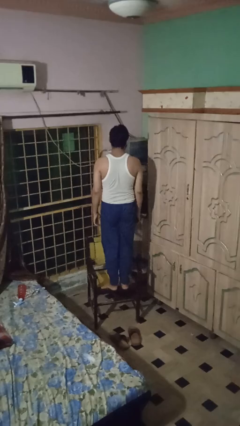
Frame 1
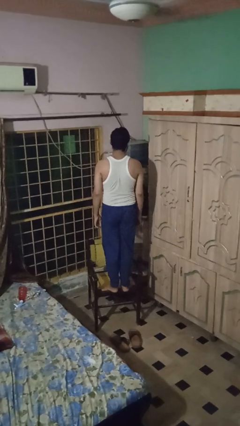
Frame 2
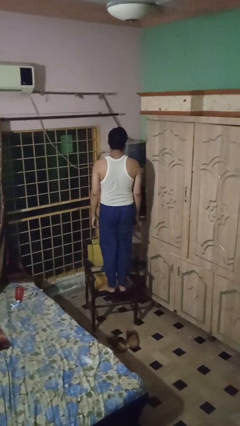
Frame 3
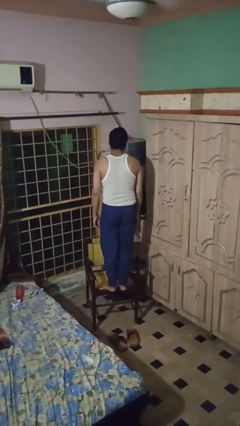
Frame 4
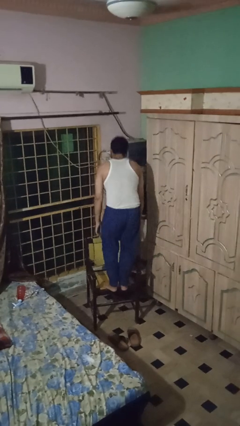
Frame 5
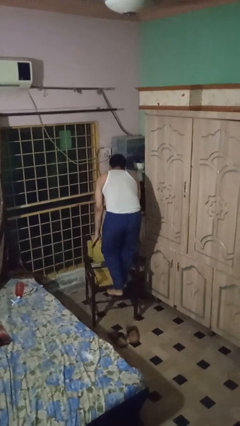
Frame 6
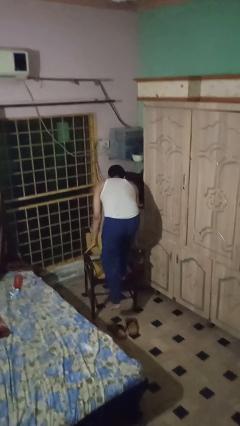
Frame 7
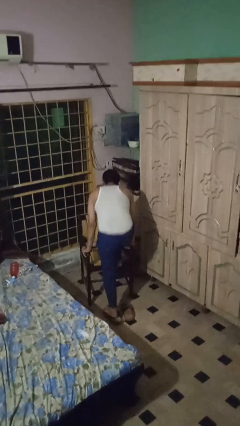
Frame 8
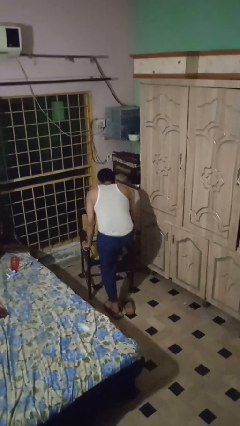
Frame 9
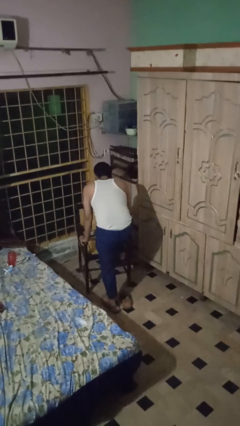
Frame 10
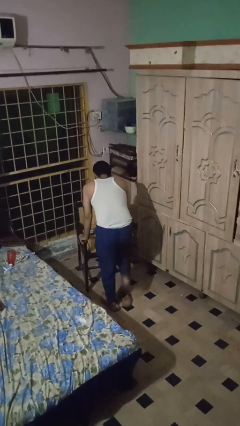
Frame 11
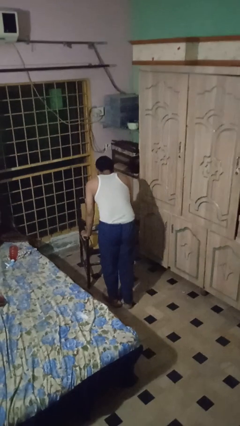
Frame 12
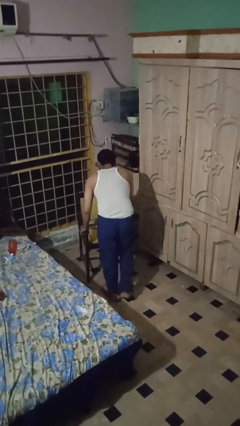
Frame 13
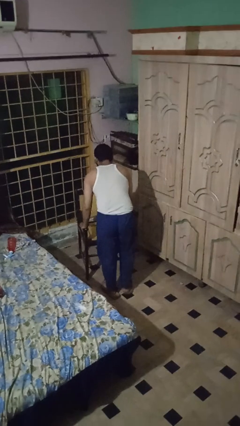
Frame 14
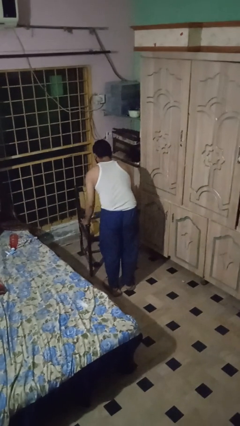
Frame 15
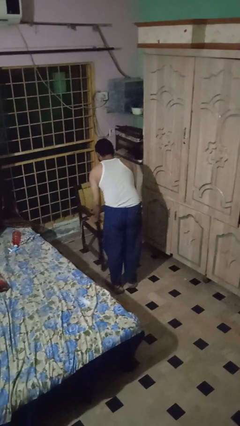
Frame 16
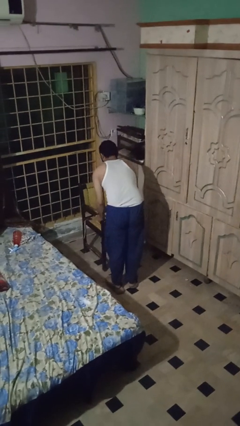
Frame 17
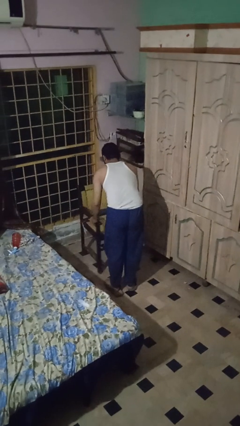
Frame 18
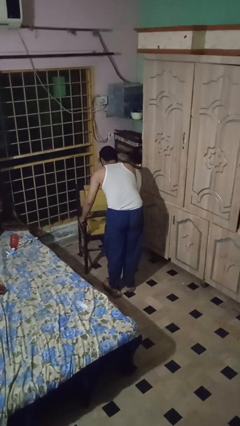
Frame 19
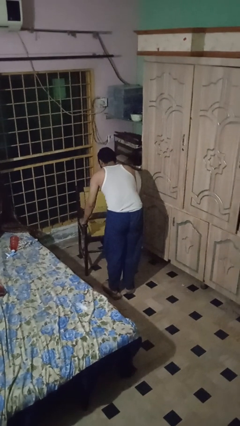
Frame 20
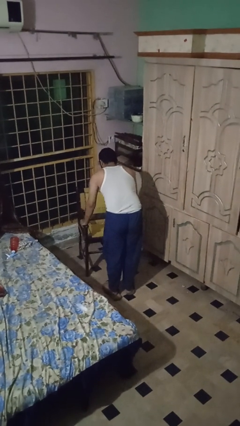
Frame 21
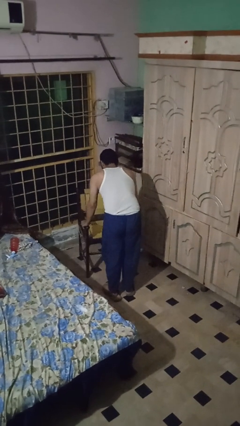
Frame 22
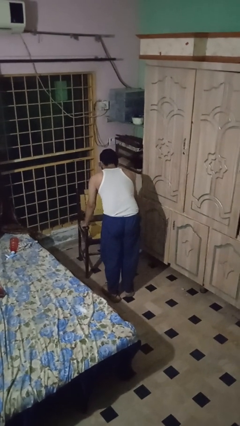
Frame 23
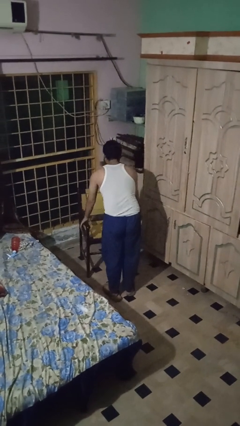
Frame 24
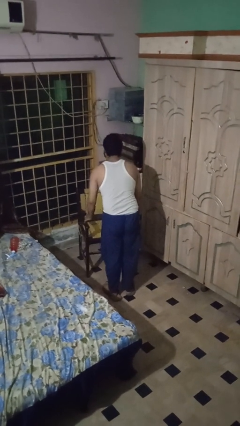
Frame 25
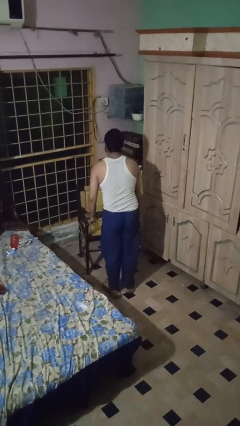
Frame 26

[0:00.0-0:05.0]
person climbs off chair

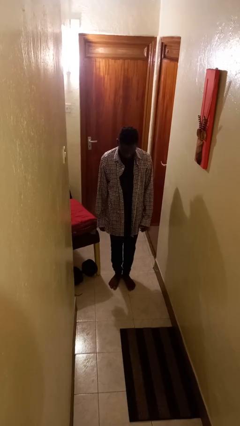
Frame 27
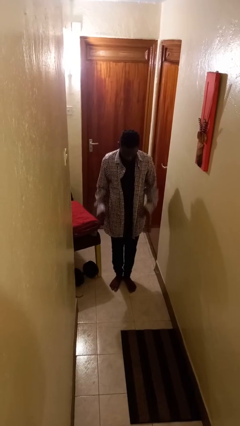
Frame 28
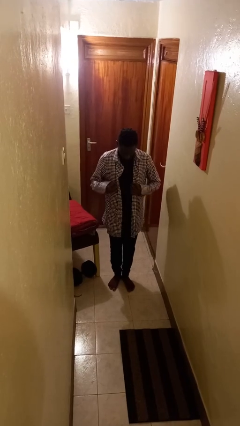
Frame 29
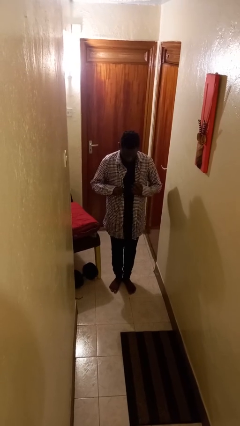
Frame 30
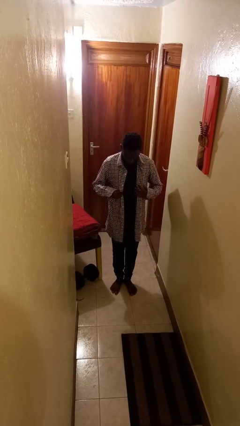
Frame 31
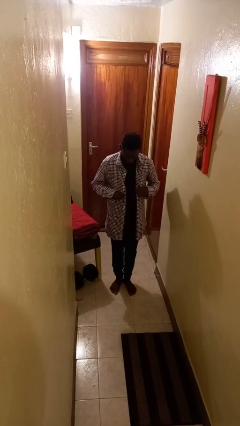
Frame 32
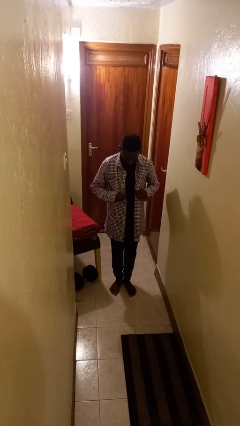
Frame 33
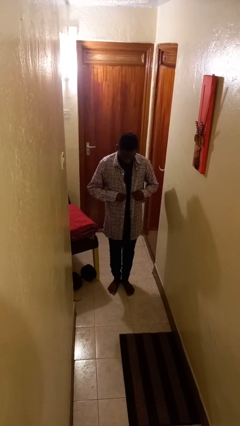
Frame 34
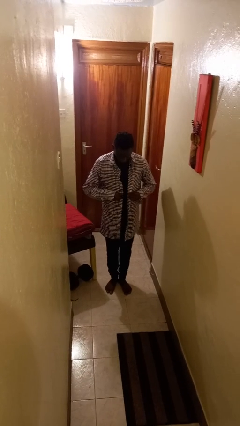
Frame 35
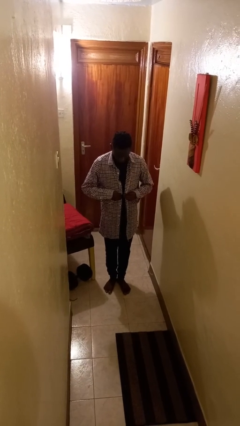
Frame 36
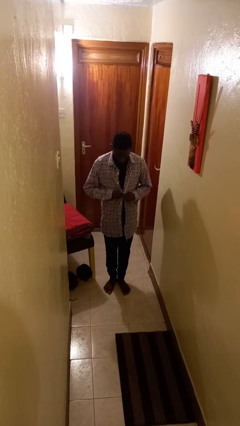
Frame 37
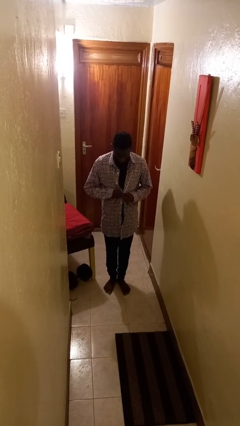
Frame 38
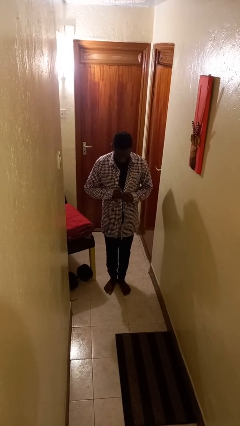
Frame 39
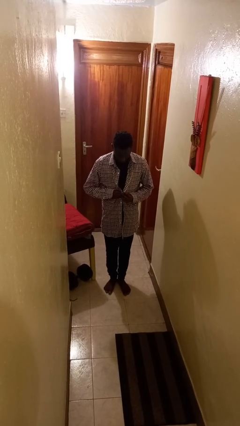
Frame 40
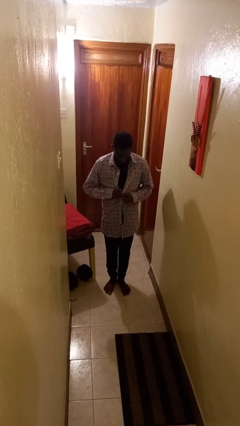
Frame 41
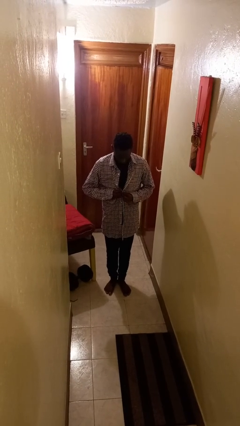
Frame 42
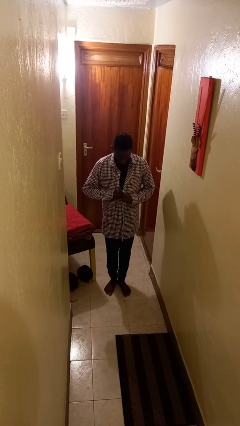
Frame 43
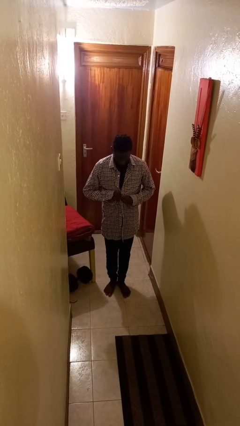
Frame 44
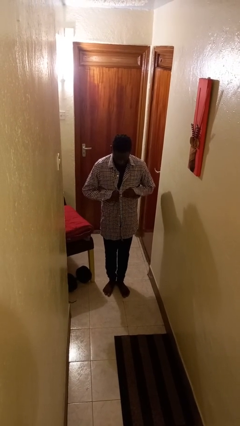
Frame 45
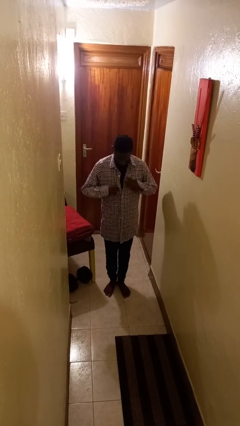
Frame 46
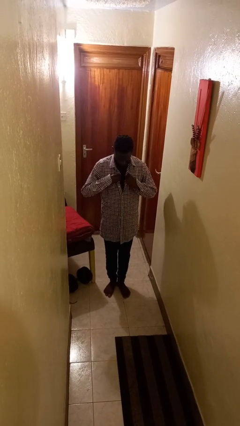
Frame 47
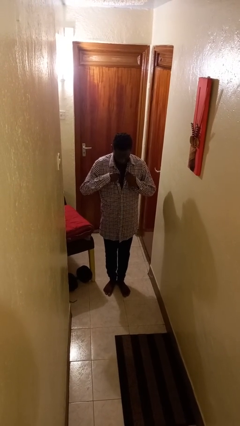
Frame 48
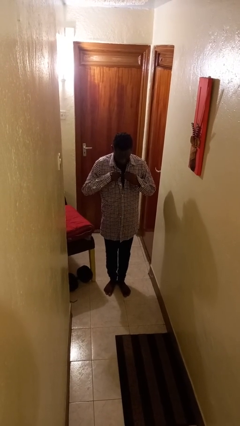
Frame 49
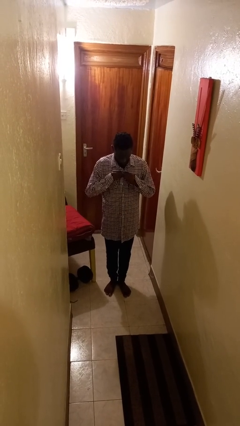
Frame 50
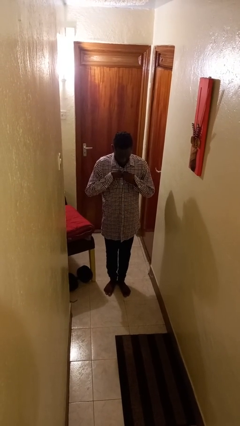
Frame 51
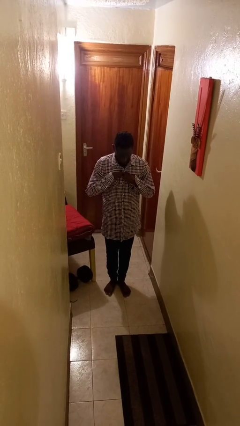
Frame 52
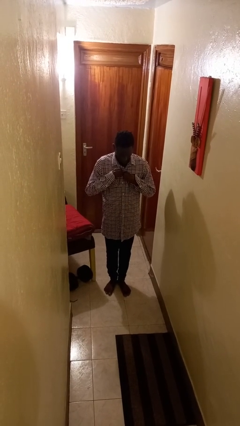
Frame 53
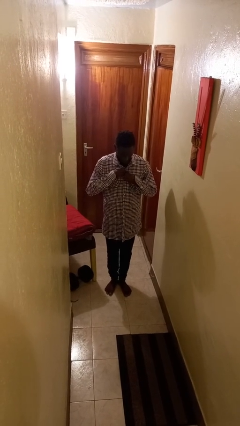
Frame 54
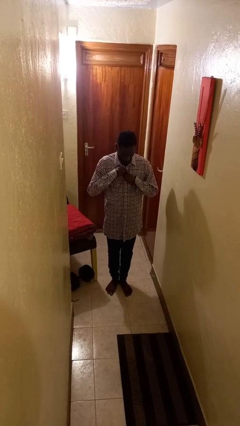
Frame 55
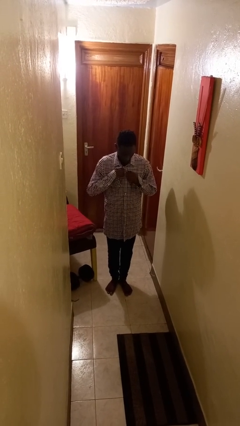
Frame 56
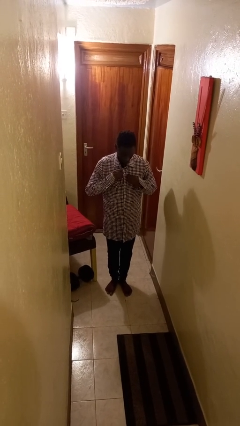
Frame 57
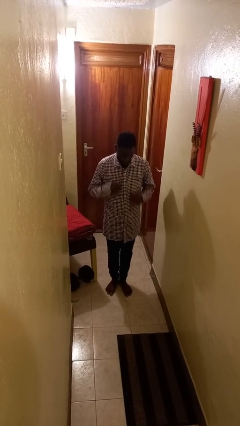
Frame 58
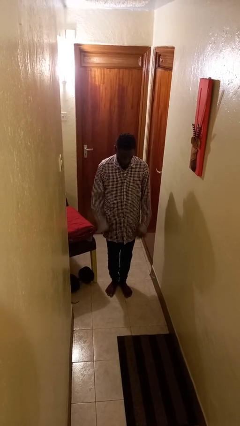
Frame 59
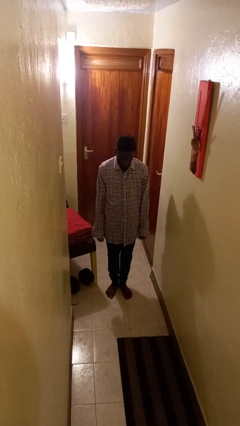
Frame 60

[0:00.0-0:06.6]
person buttons shirt

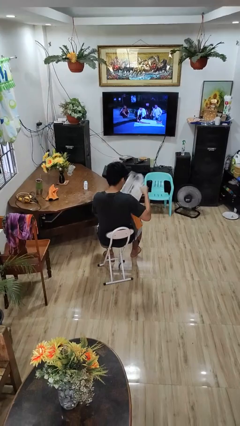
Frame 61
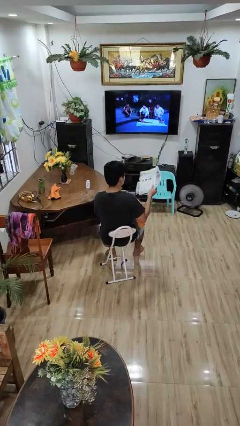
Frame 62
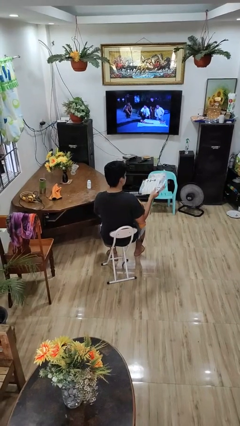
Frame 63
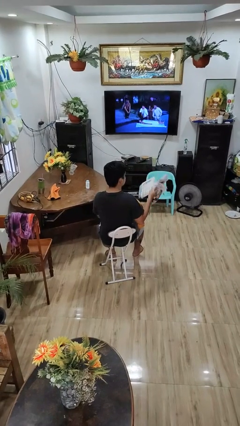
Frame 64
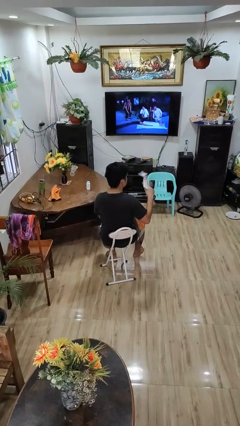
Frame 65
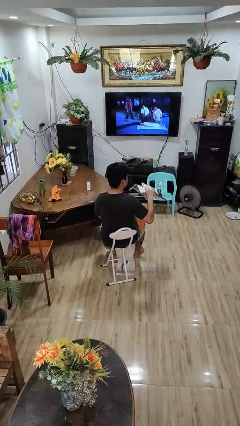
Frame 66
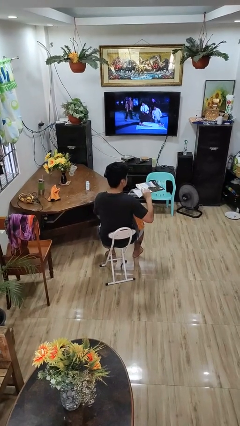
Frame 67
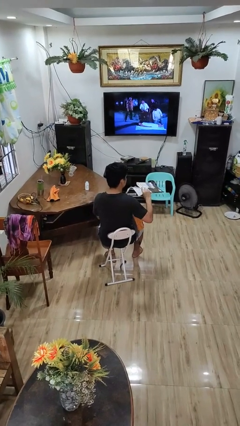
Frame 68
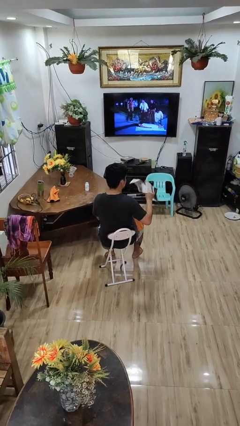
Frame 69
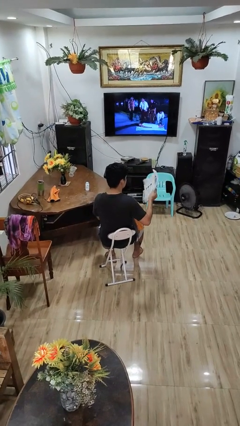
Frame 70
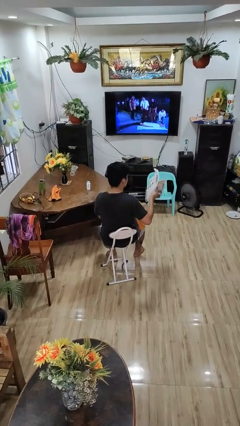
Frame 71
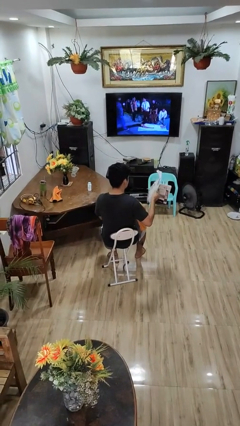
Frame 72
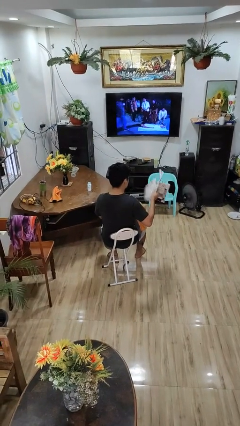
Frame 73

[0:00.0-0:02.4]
person takes object from backpack

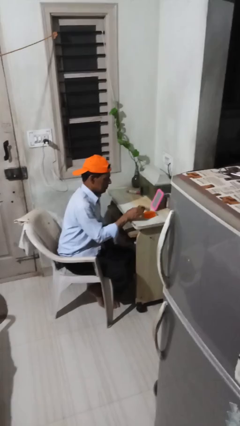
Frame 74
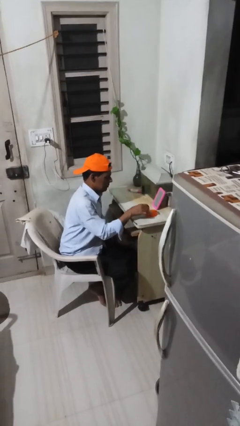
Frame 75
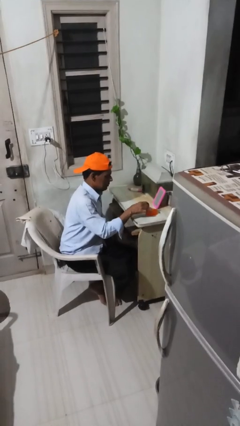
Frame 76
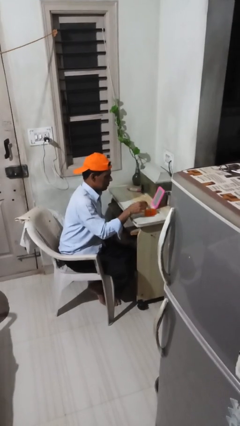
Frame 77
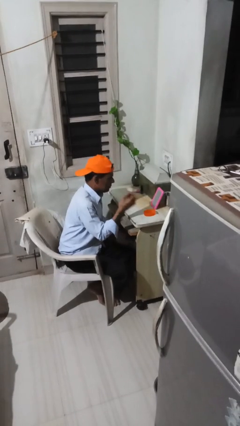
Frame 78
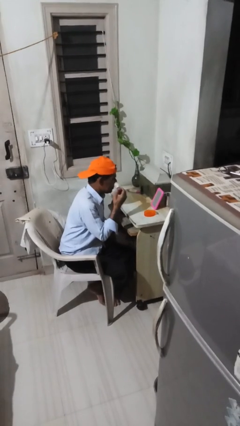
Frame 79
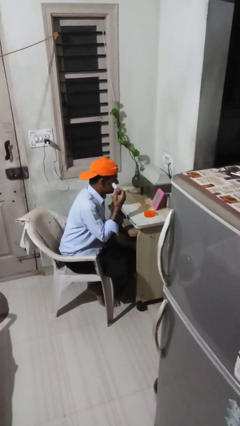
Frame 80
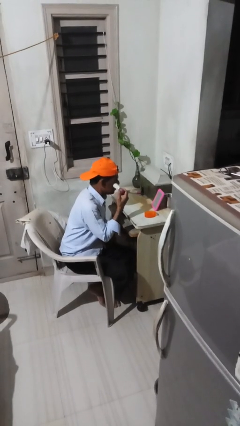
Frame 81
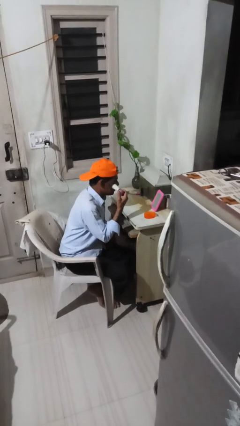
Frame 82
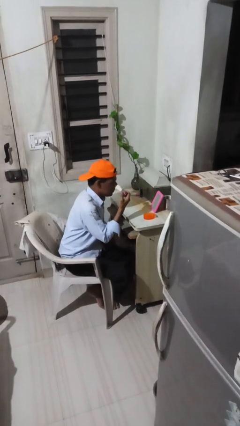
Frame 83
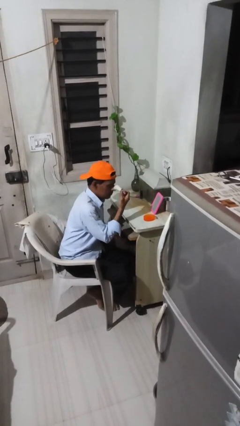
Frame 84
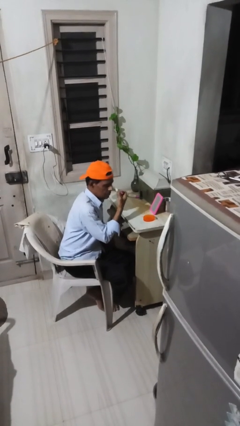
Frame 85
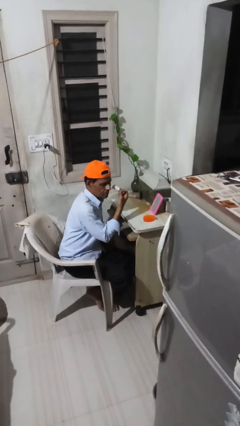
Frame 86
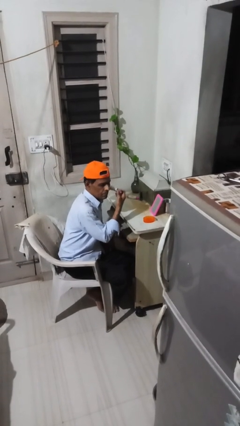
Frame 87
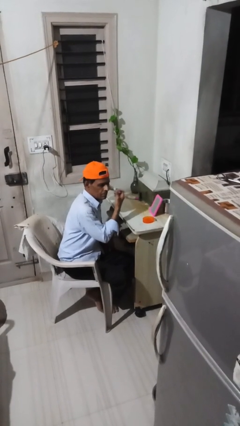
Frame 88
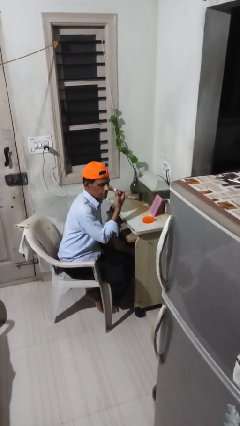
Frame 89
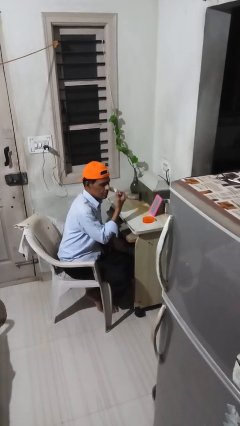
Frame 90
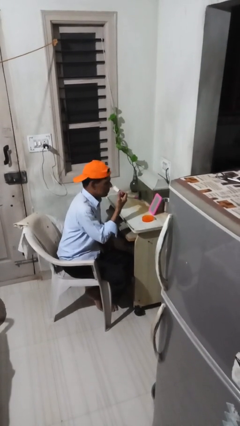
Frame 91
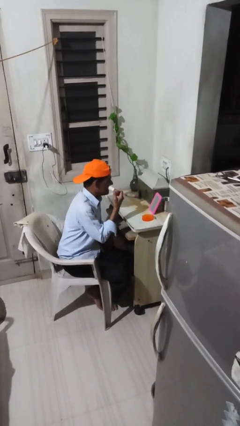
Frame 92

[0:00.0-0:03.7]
person applies foundation makeup

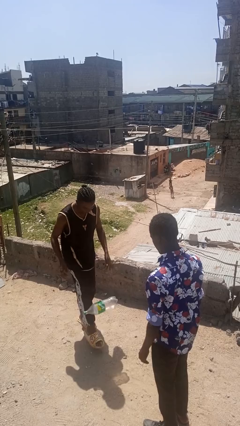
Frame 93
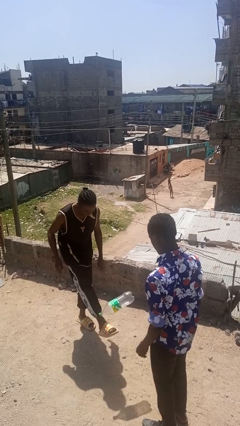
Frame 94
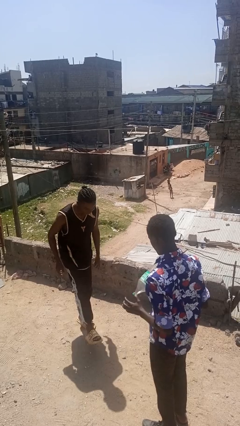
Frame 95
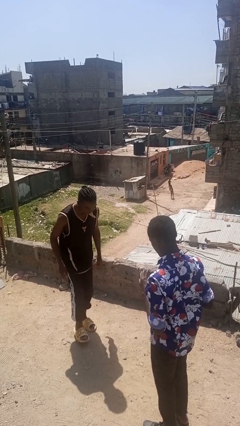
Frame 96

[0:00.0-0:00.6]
person kicks object to person
